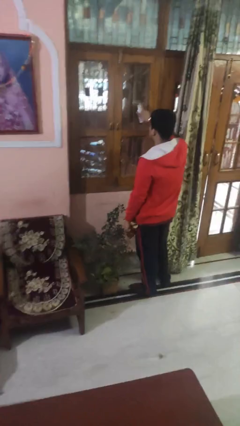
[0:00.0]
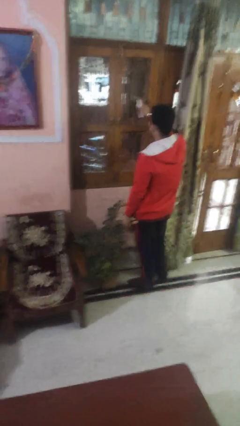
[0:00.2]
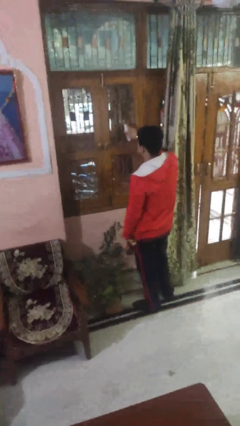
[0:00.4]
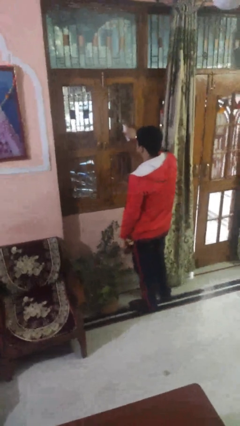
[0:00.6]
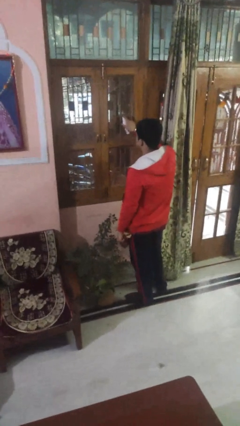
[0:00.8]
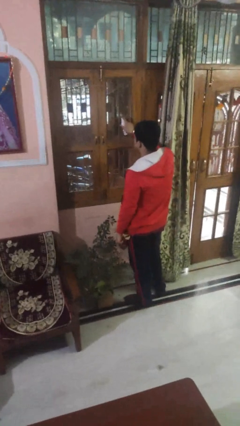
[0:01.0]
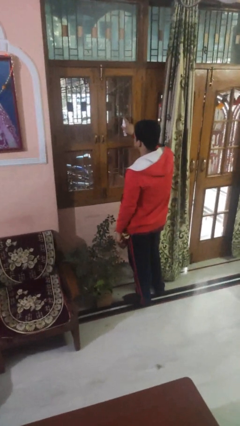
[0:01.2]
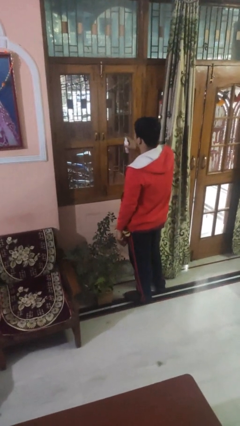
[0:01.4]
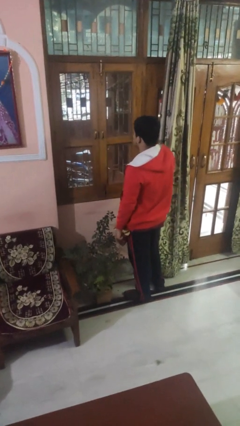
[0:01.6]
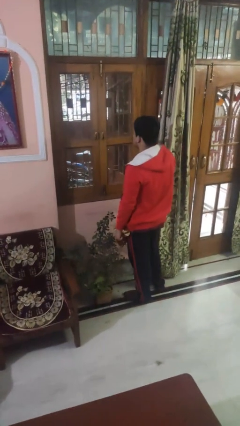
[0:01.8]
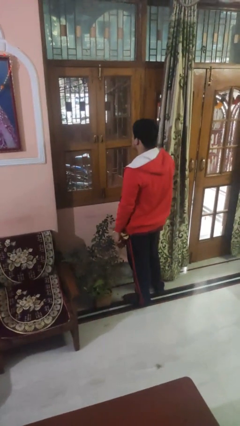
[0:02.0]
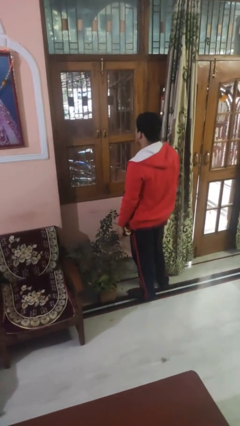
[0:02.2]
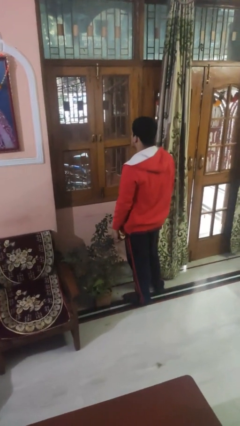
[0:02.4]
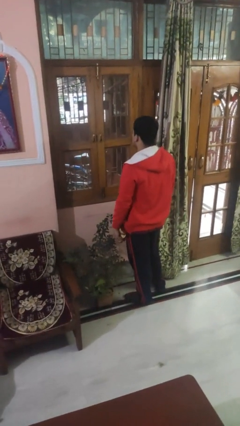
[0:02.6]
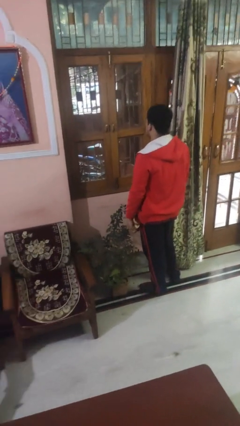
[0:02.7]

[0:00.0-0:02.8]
person sprays from bottle

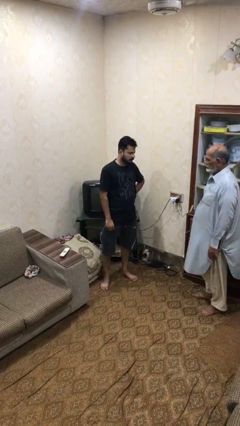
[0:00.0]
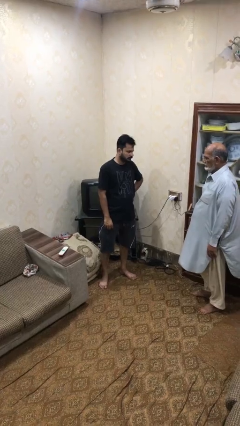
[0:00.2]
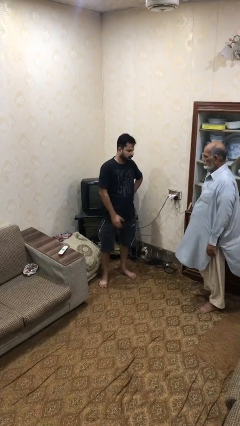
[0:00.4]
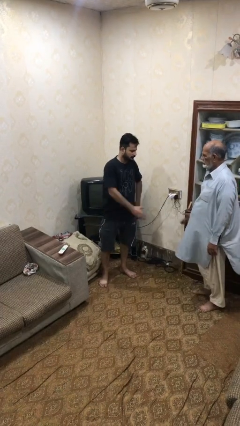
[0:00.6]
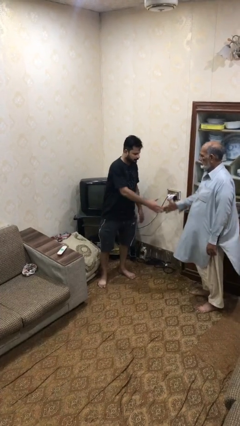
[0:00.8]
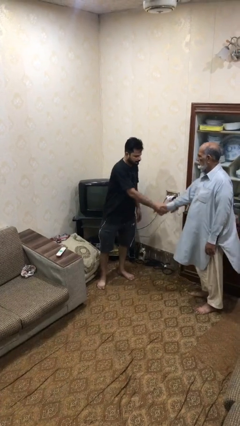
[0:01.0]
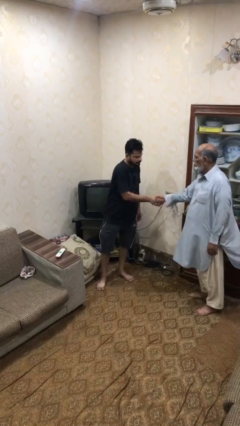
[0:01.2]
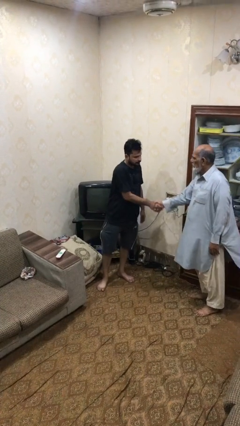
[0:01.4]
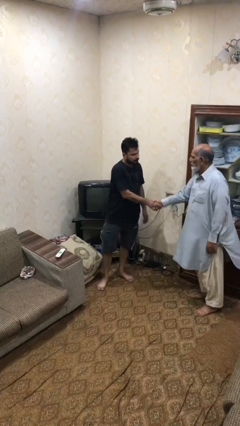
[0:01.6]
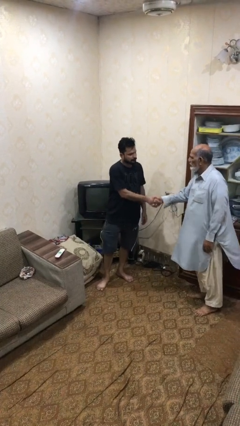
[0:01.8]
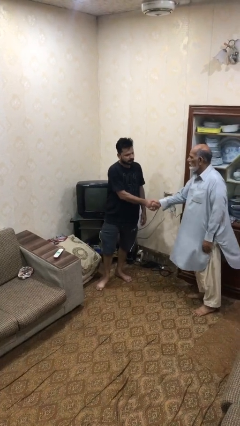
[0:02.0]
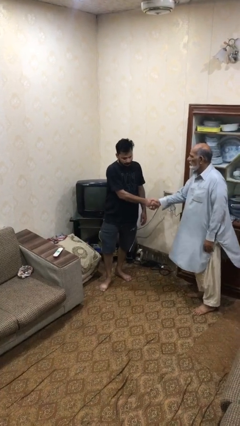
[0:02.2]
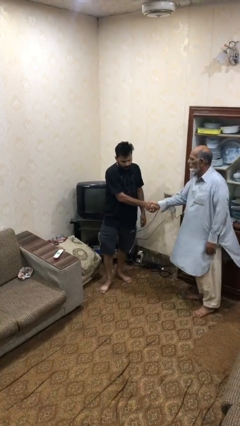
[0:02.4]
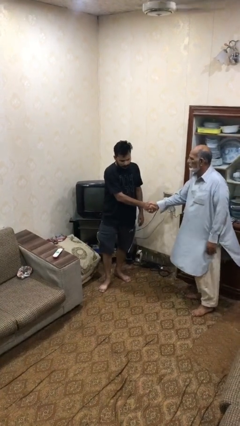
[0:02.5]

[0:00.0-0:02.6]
person shakes hand

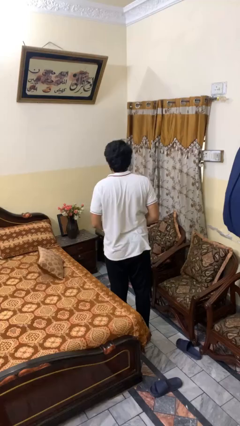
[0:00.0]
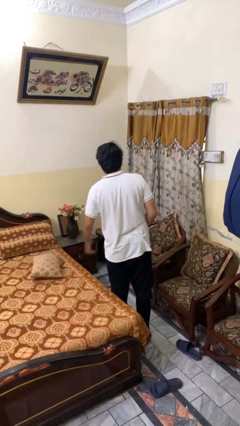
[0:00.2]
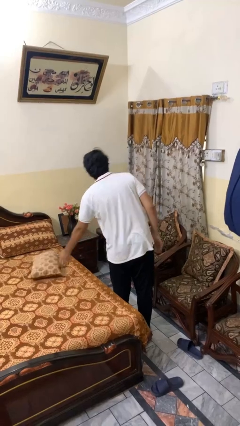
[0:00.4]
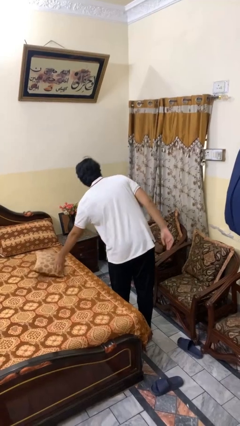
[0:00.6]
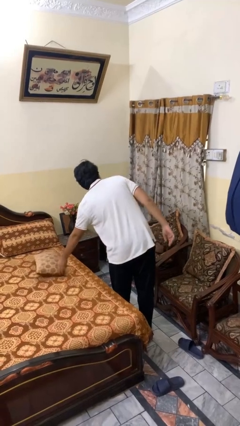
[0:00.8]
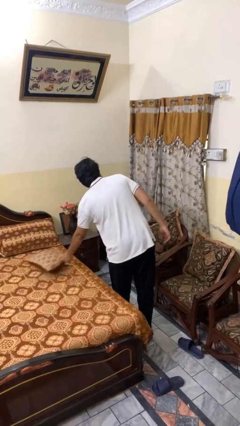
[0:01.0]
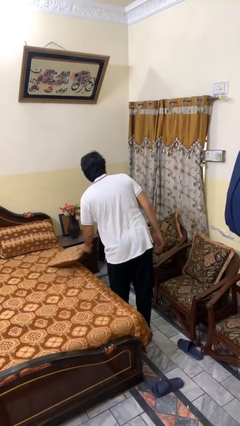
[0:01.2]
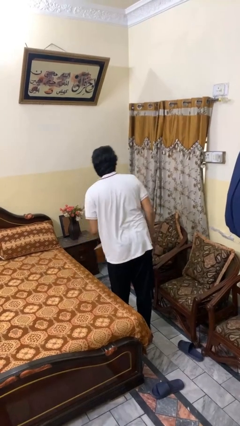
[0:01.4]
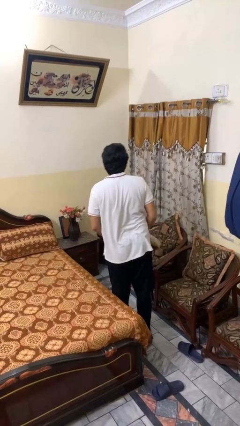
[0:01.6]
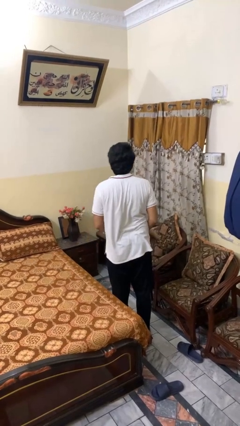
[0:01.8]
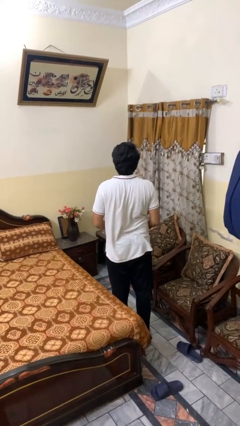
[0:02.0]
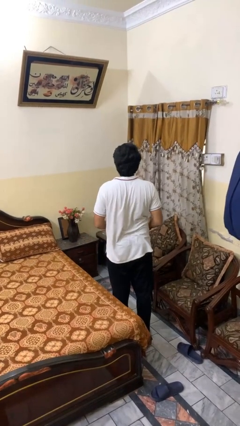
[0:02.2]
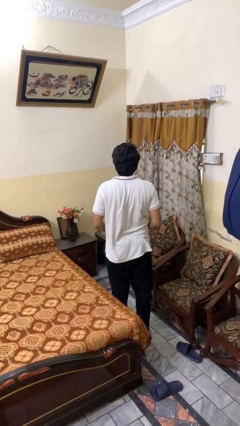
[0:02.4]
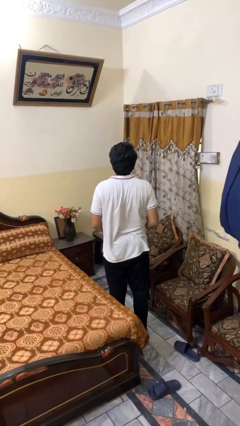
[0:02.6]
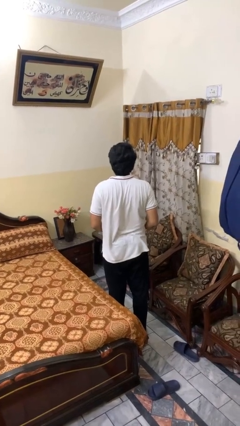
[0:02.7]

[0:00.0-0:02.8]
person picks up object from bed

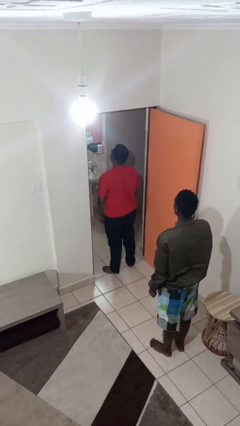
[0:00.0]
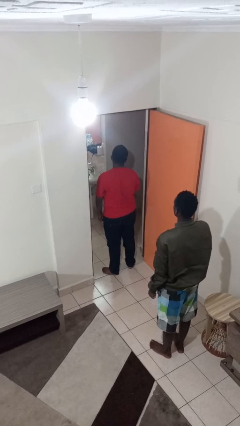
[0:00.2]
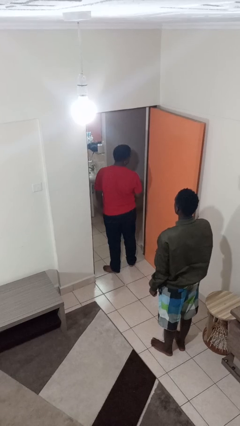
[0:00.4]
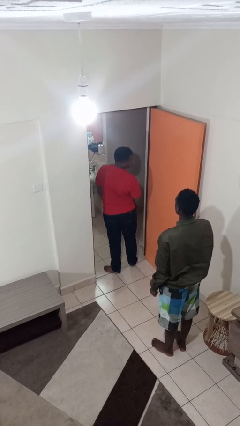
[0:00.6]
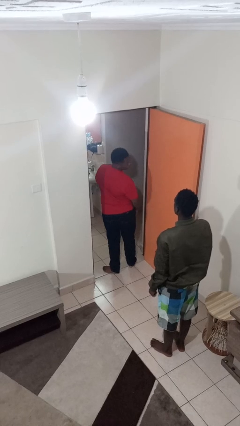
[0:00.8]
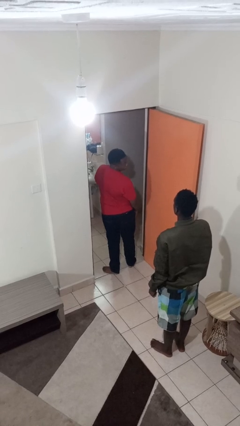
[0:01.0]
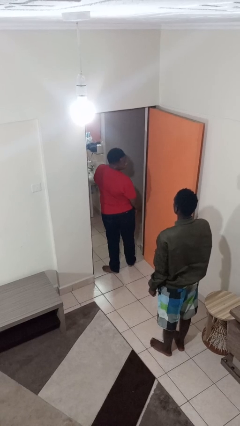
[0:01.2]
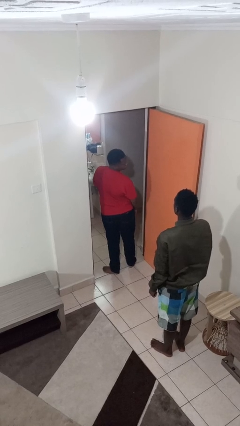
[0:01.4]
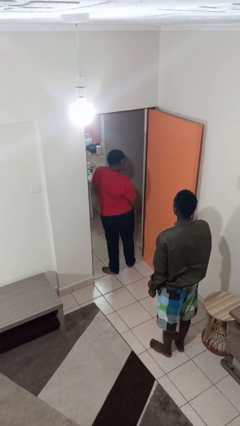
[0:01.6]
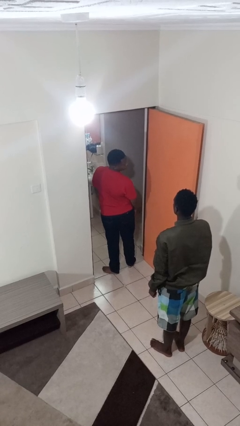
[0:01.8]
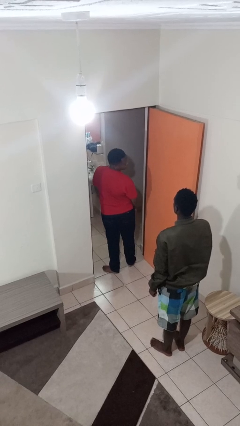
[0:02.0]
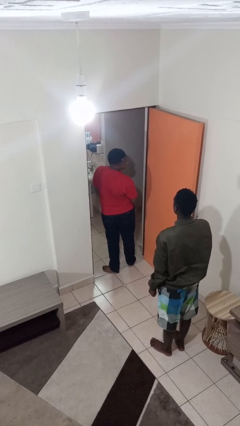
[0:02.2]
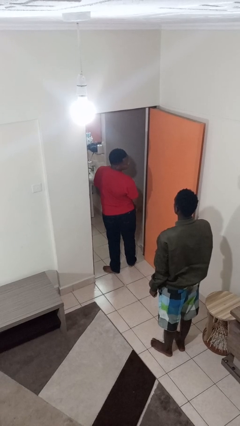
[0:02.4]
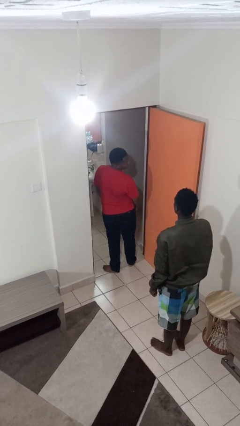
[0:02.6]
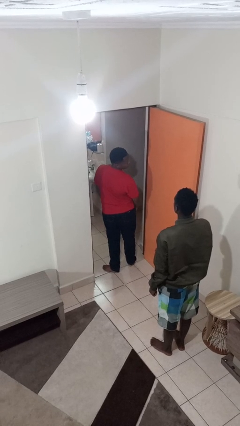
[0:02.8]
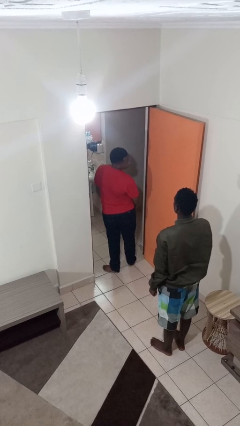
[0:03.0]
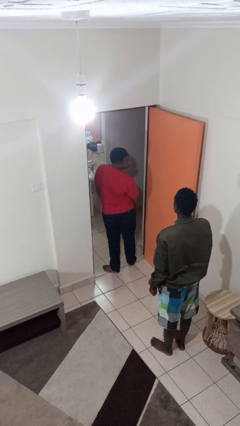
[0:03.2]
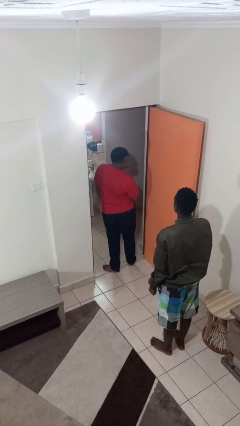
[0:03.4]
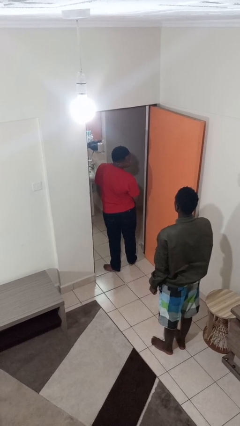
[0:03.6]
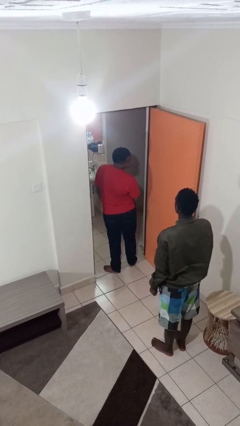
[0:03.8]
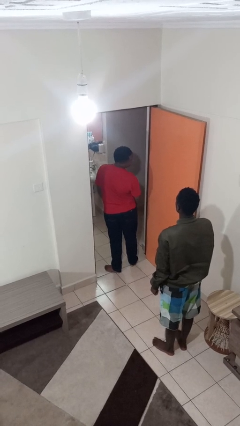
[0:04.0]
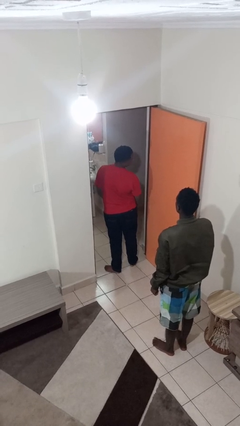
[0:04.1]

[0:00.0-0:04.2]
person looks over shoulder

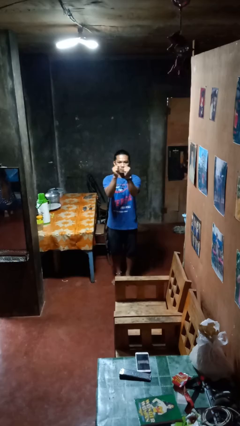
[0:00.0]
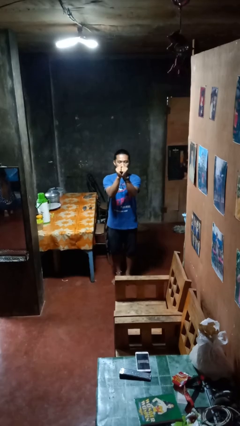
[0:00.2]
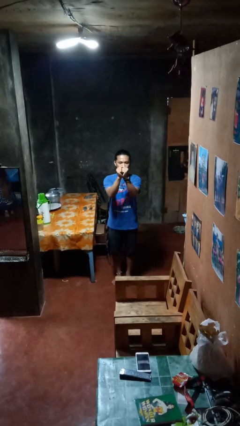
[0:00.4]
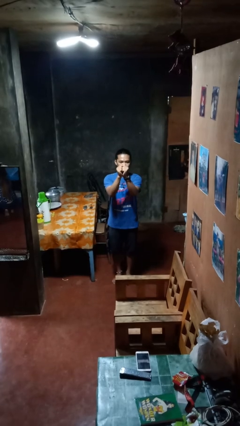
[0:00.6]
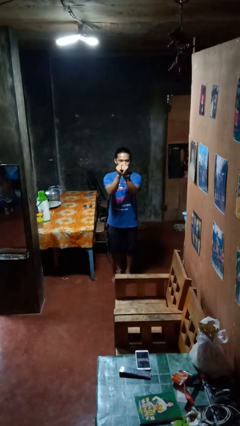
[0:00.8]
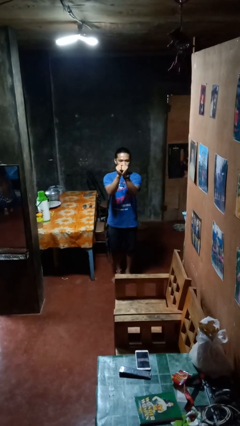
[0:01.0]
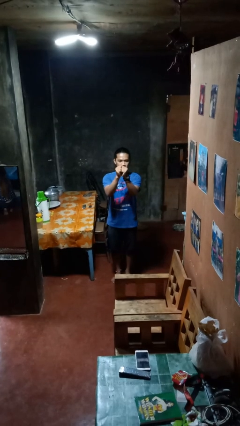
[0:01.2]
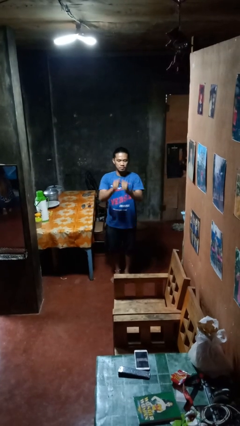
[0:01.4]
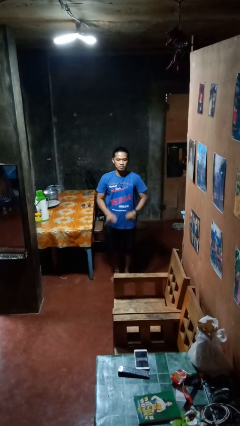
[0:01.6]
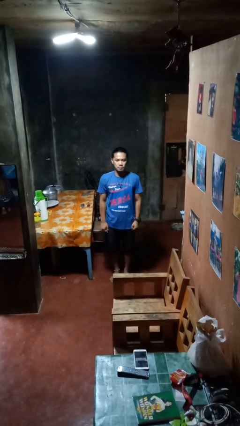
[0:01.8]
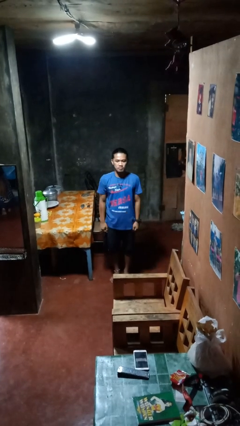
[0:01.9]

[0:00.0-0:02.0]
person gestures zoom out

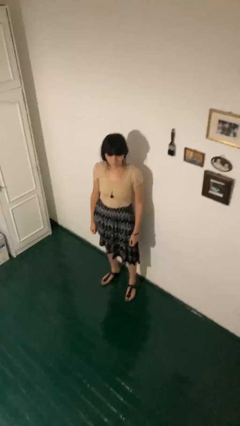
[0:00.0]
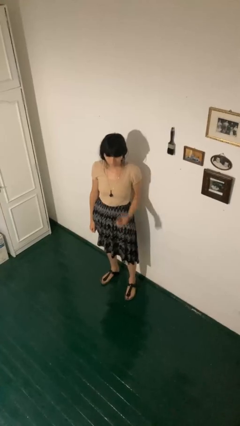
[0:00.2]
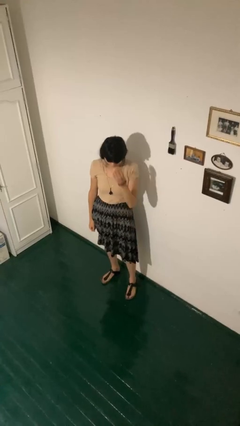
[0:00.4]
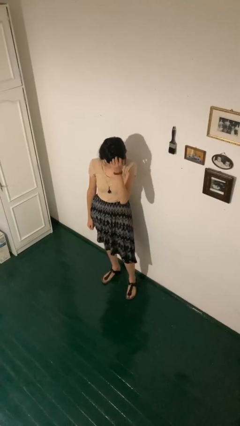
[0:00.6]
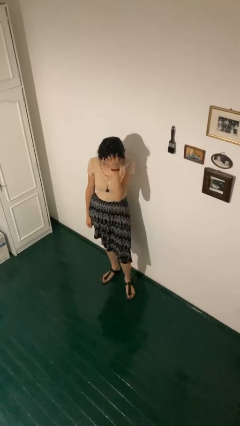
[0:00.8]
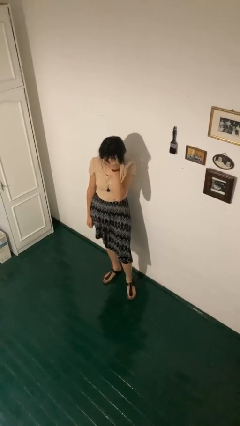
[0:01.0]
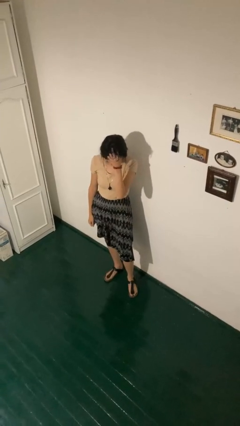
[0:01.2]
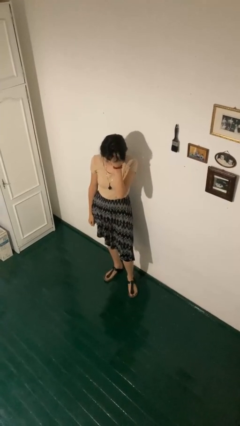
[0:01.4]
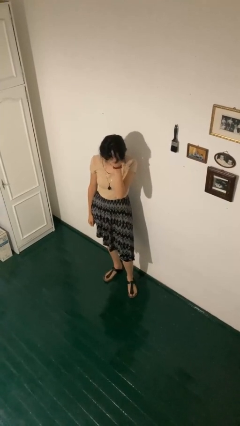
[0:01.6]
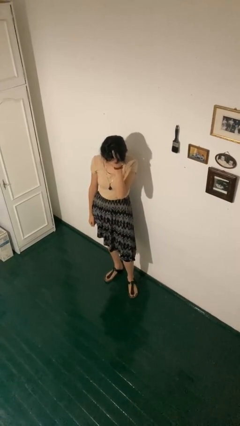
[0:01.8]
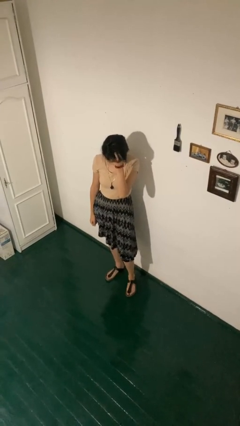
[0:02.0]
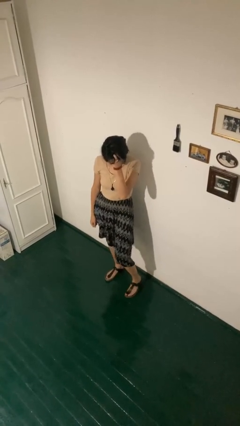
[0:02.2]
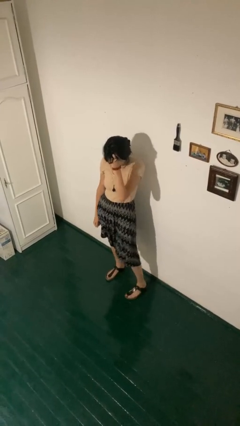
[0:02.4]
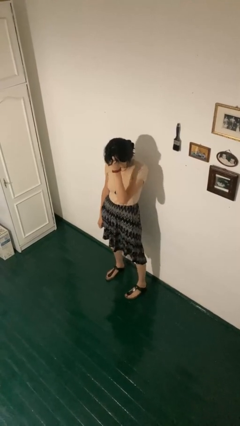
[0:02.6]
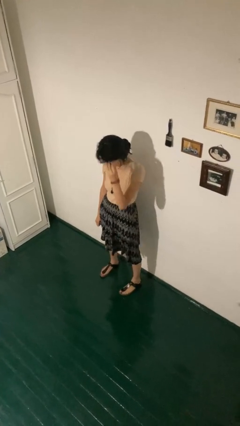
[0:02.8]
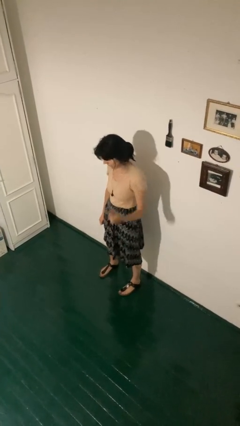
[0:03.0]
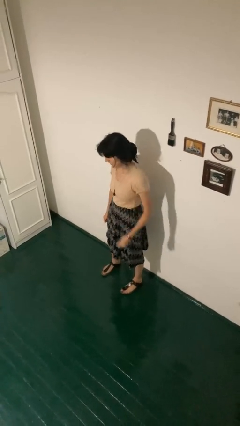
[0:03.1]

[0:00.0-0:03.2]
person scratches face
